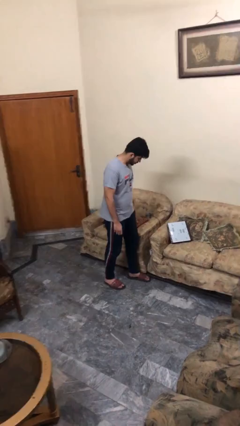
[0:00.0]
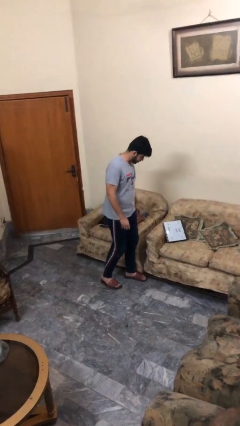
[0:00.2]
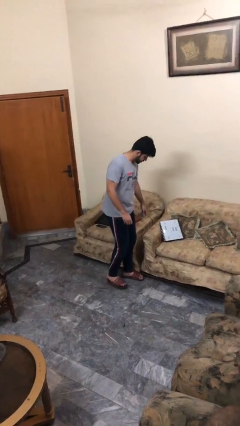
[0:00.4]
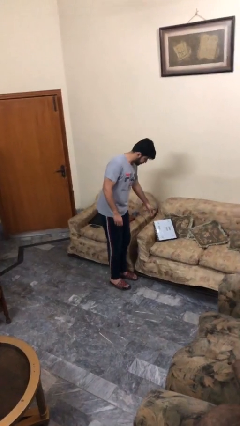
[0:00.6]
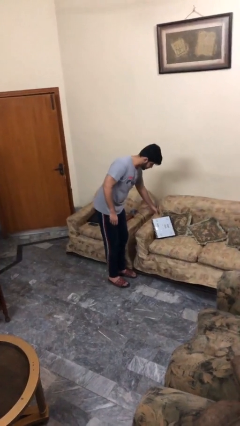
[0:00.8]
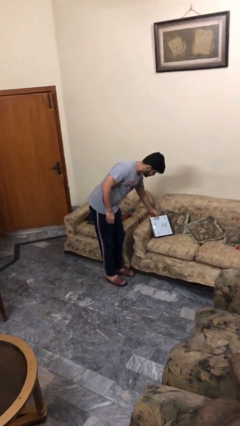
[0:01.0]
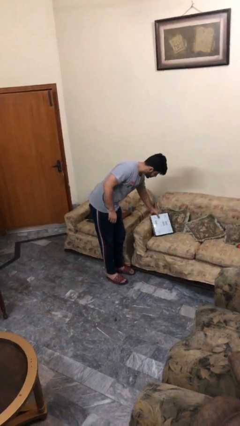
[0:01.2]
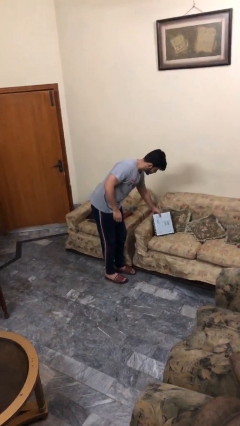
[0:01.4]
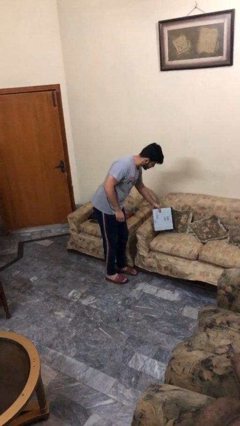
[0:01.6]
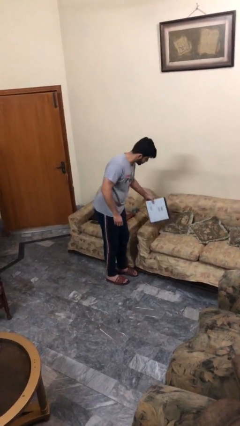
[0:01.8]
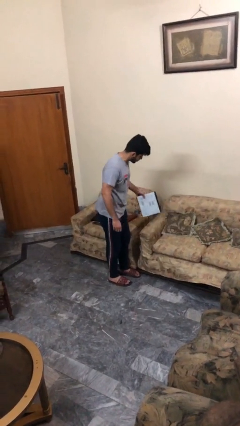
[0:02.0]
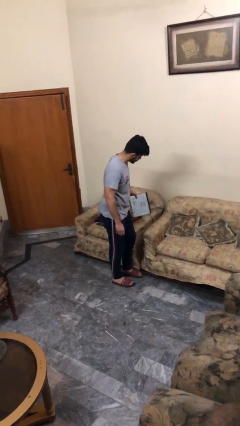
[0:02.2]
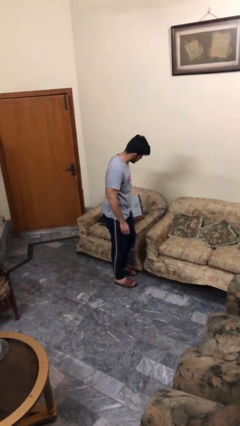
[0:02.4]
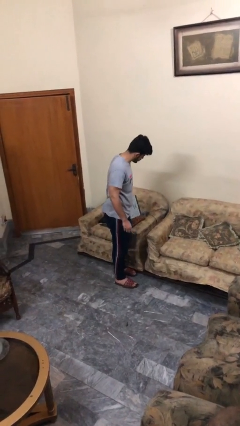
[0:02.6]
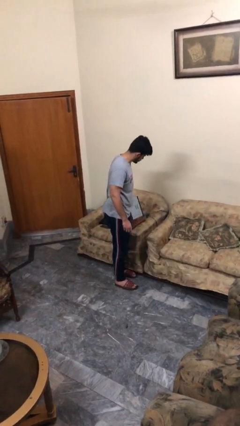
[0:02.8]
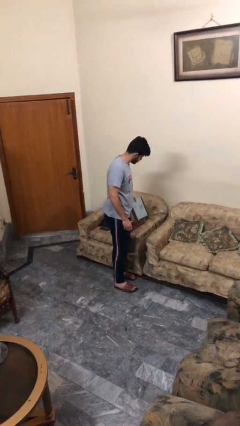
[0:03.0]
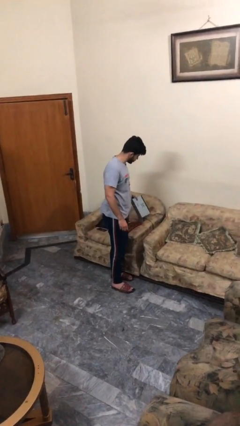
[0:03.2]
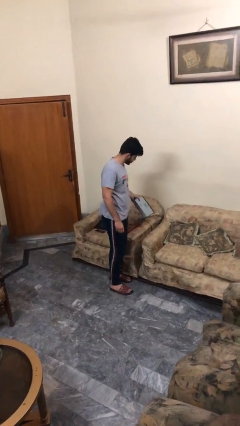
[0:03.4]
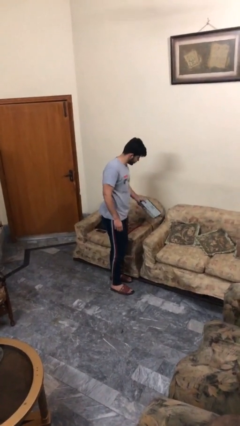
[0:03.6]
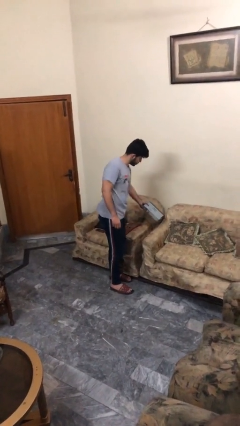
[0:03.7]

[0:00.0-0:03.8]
person picks up object from couch

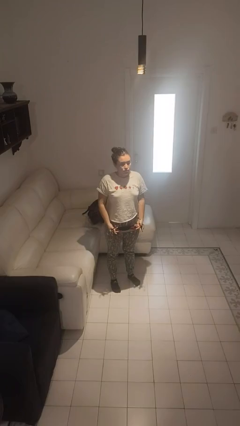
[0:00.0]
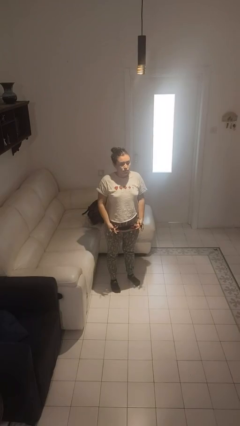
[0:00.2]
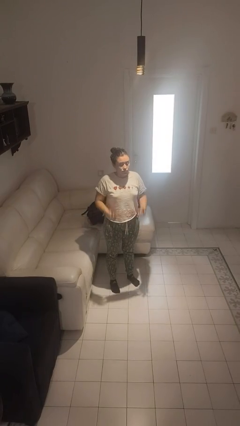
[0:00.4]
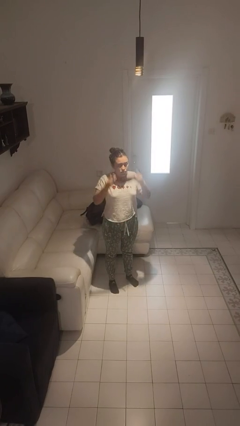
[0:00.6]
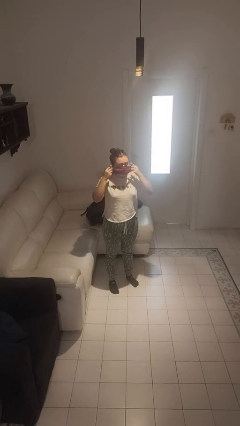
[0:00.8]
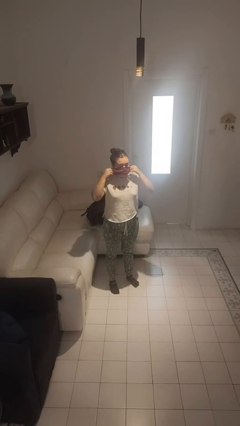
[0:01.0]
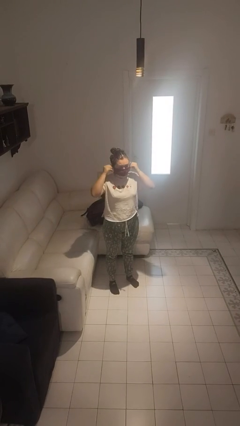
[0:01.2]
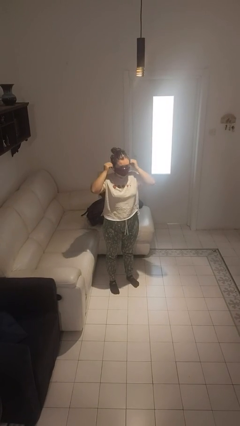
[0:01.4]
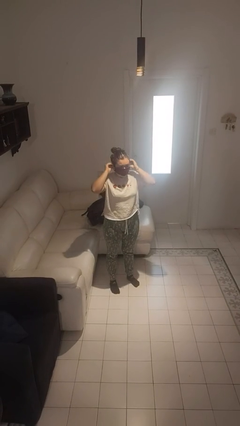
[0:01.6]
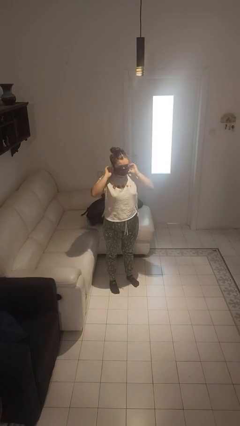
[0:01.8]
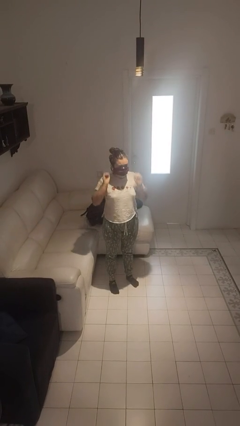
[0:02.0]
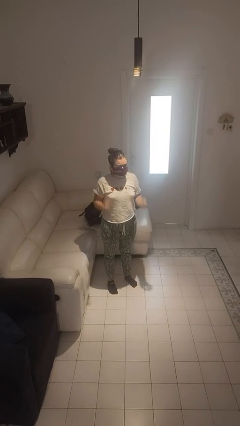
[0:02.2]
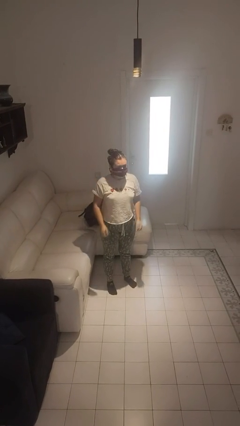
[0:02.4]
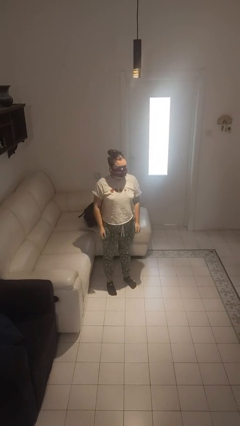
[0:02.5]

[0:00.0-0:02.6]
person puts on facemask

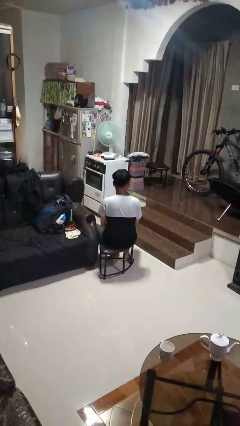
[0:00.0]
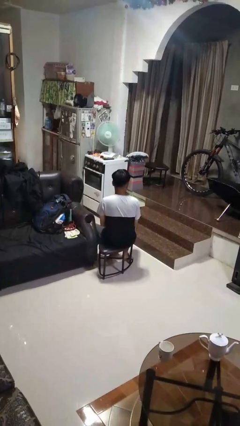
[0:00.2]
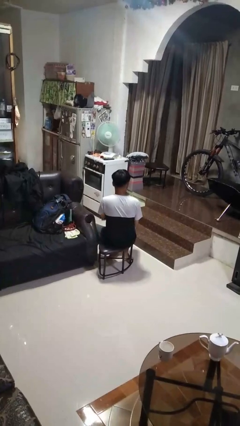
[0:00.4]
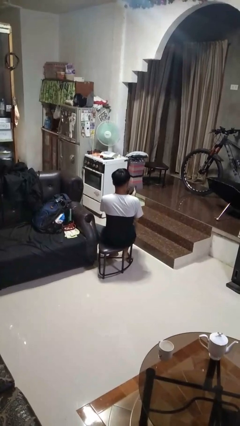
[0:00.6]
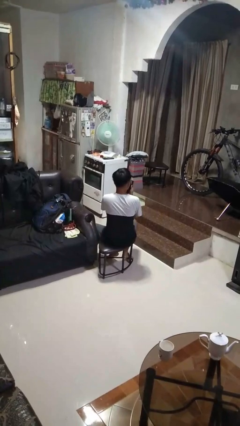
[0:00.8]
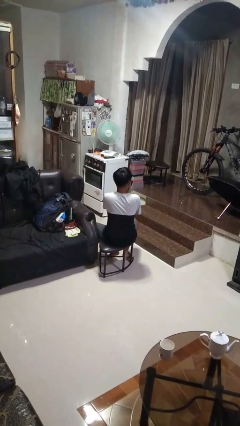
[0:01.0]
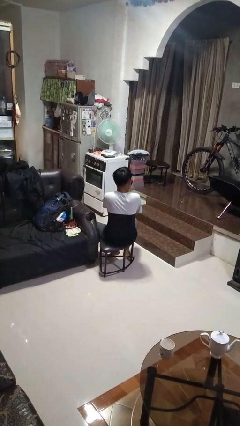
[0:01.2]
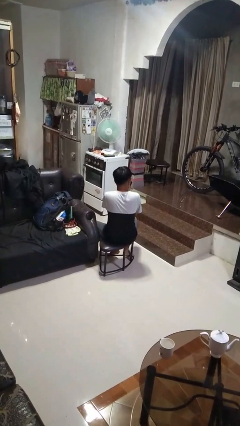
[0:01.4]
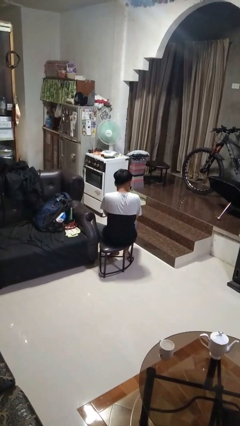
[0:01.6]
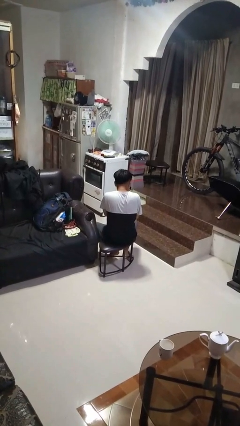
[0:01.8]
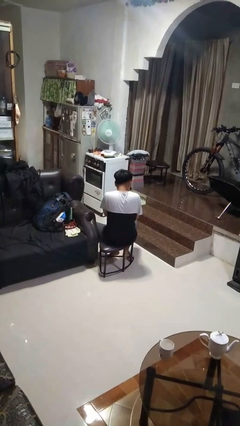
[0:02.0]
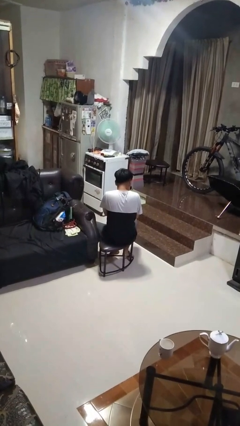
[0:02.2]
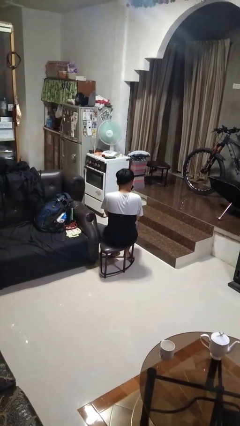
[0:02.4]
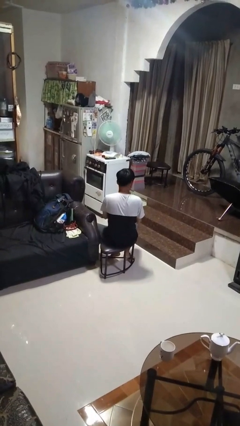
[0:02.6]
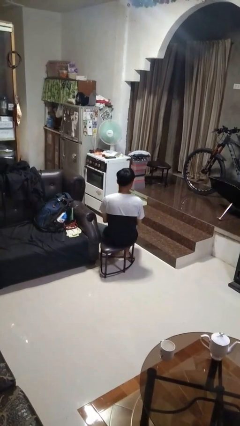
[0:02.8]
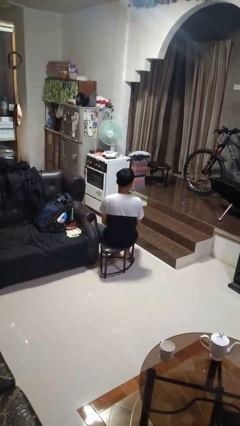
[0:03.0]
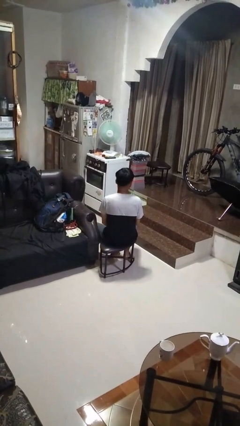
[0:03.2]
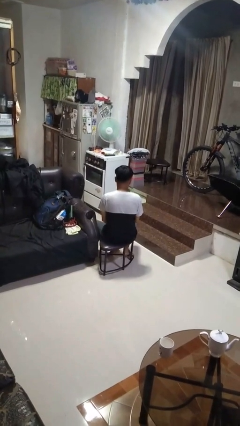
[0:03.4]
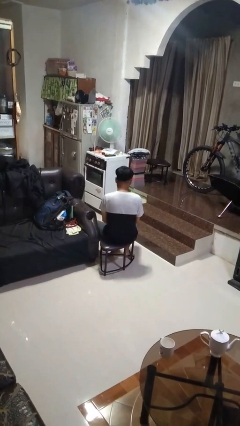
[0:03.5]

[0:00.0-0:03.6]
person blows nose

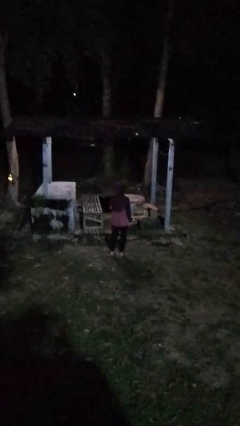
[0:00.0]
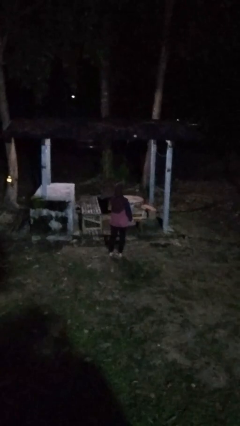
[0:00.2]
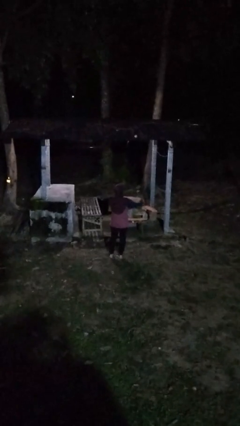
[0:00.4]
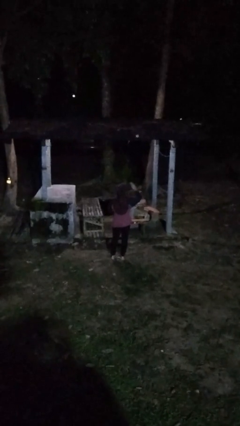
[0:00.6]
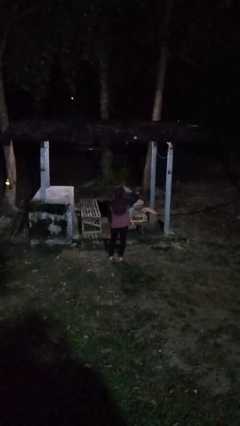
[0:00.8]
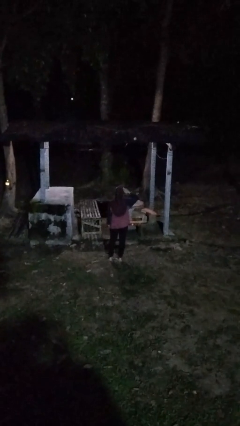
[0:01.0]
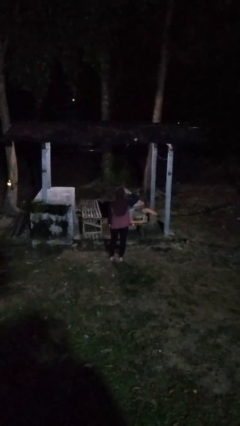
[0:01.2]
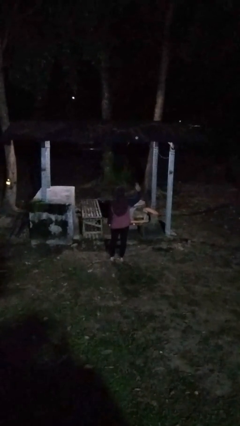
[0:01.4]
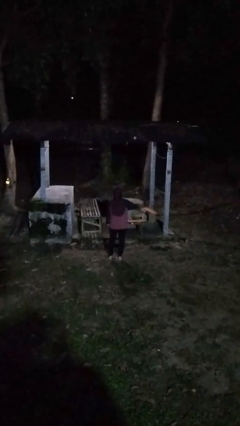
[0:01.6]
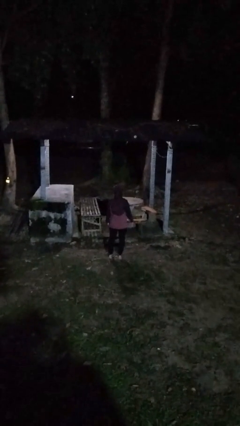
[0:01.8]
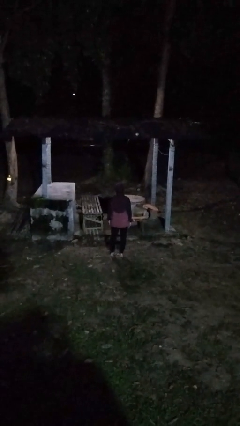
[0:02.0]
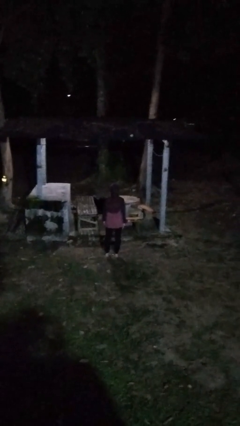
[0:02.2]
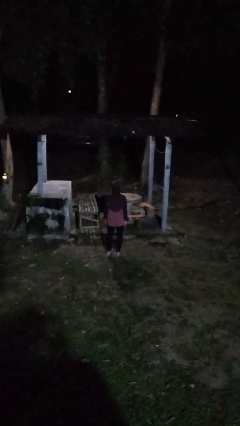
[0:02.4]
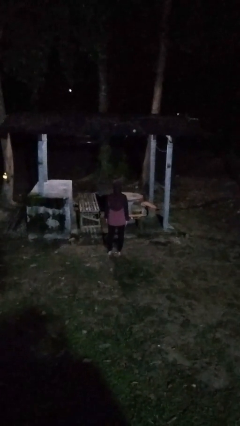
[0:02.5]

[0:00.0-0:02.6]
person salutes

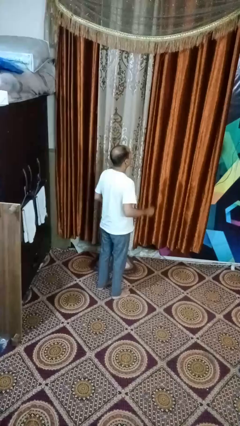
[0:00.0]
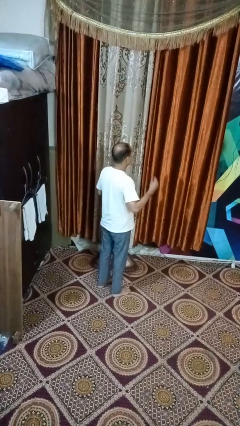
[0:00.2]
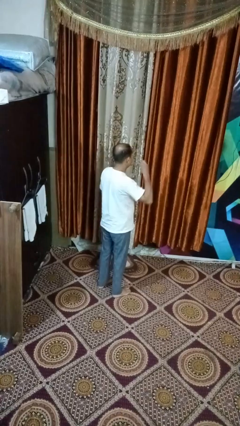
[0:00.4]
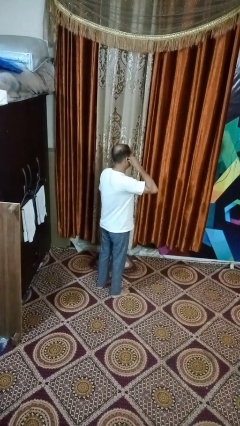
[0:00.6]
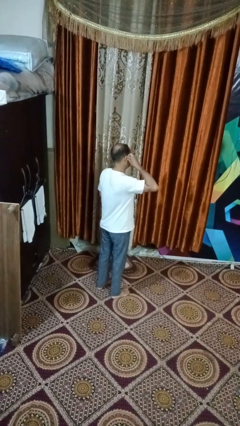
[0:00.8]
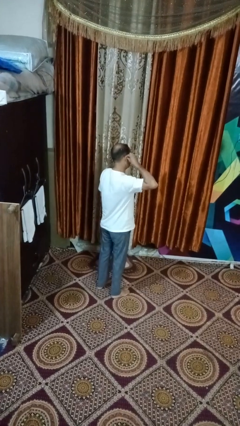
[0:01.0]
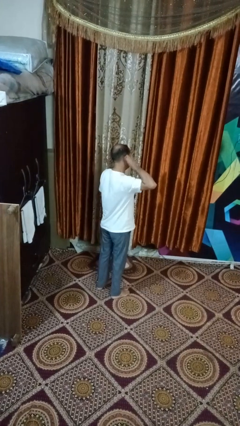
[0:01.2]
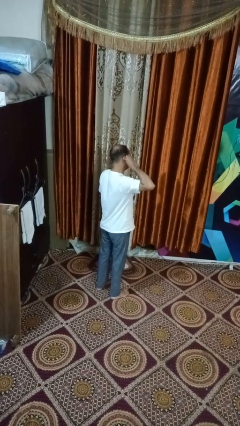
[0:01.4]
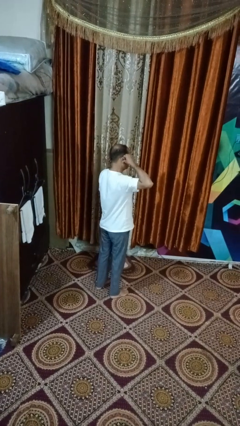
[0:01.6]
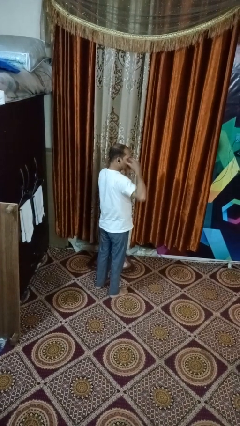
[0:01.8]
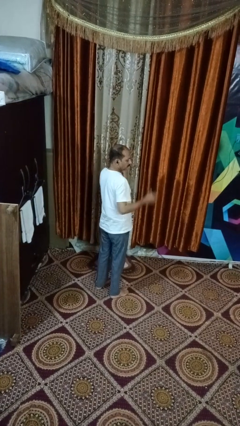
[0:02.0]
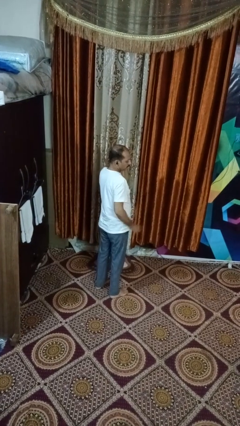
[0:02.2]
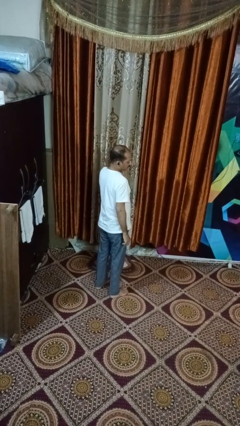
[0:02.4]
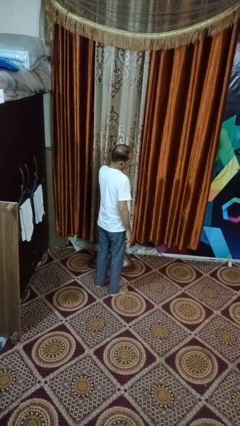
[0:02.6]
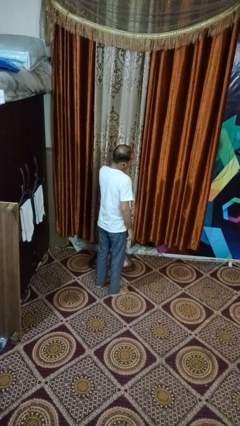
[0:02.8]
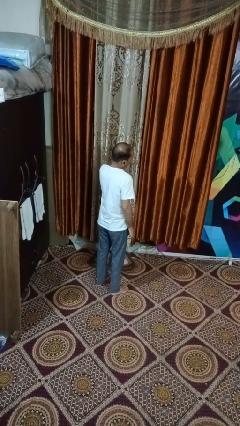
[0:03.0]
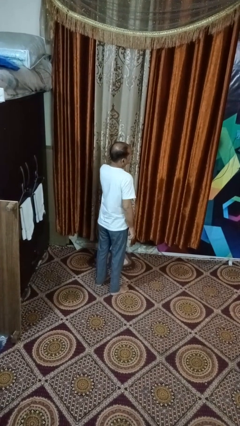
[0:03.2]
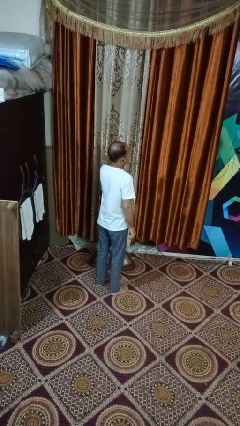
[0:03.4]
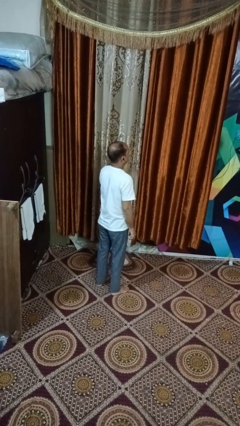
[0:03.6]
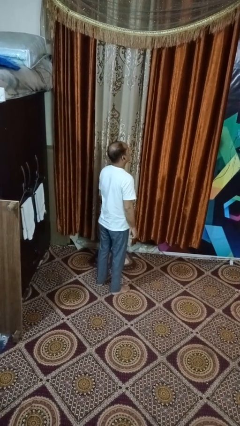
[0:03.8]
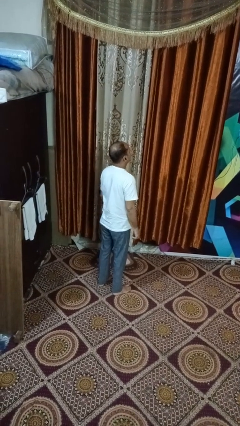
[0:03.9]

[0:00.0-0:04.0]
person puts on headphones

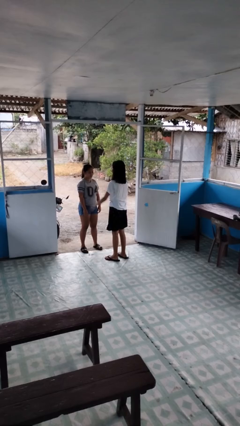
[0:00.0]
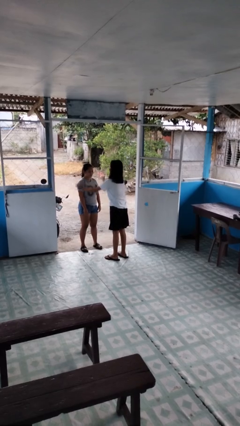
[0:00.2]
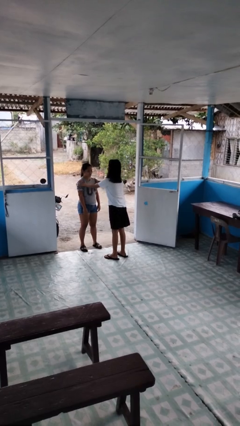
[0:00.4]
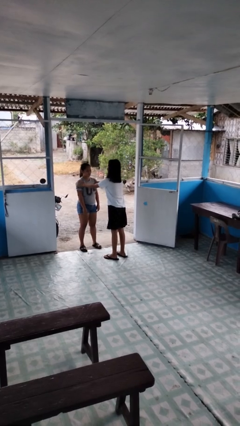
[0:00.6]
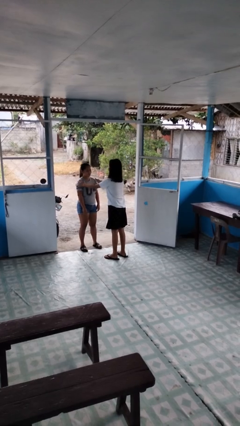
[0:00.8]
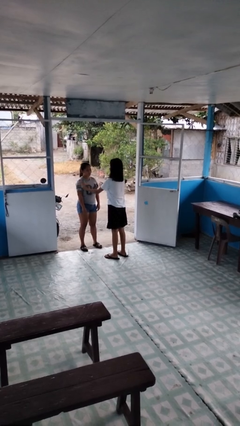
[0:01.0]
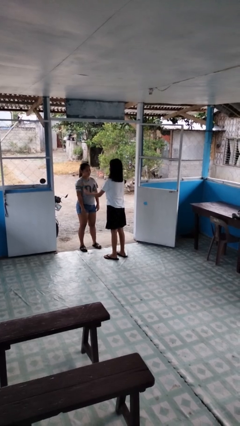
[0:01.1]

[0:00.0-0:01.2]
person pounds shoulders of person
